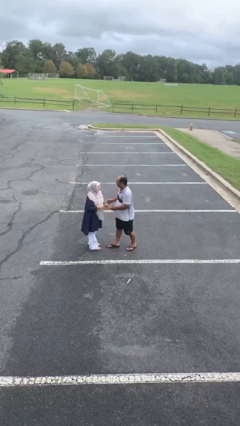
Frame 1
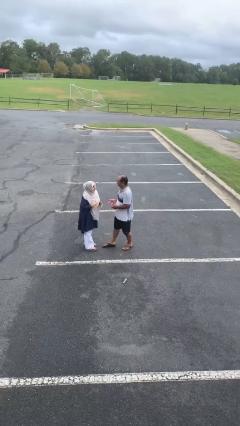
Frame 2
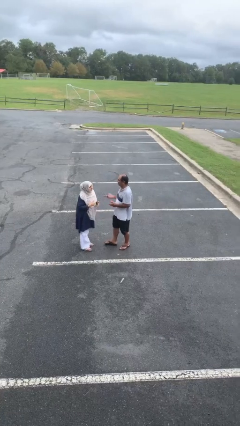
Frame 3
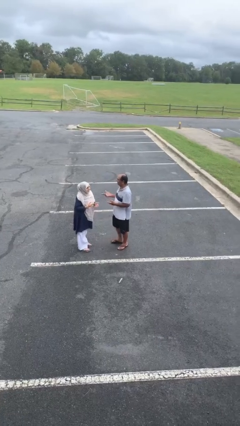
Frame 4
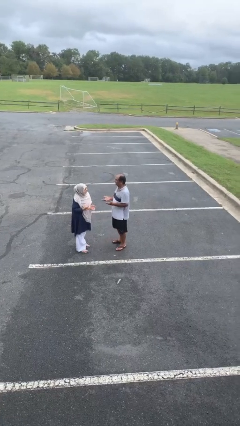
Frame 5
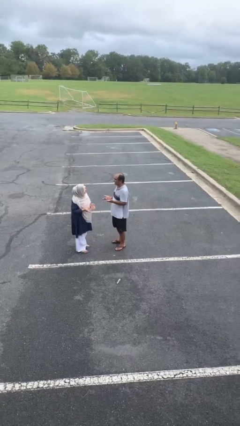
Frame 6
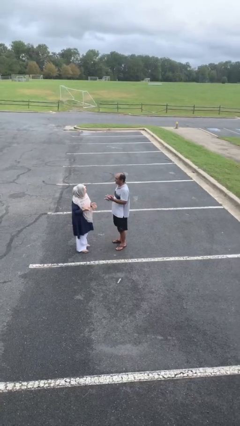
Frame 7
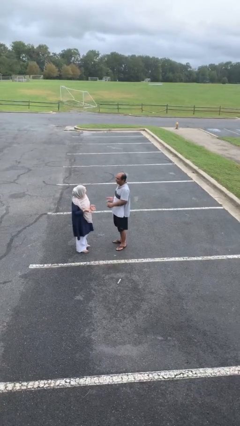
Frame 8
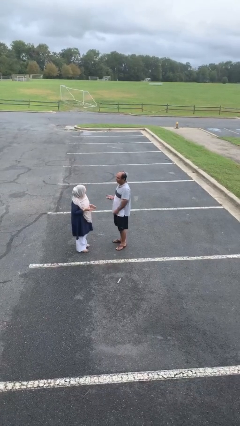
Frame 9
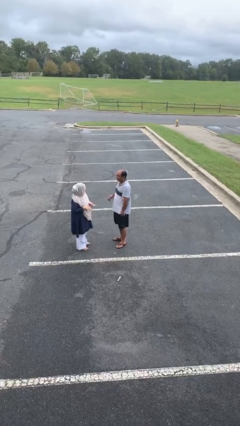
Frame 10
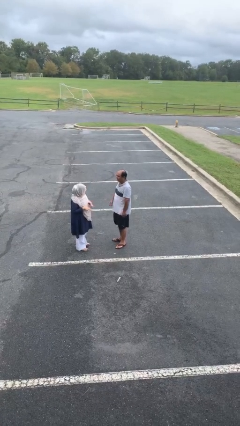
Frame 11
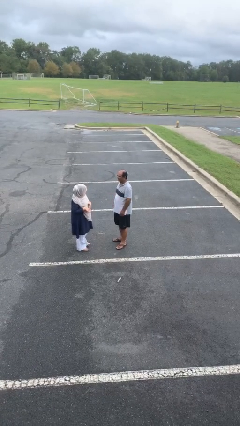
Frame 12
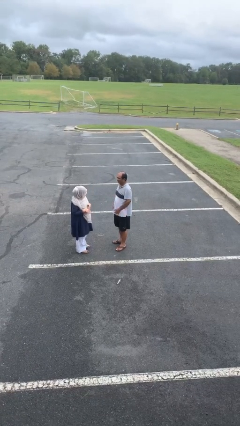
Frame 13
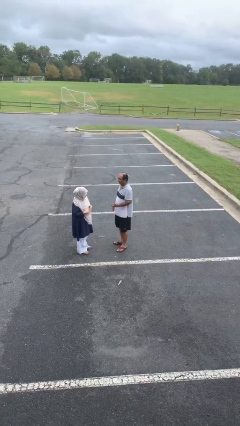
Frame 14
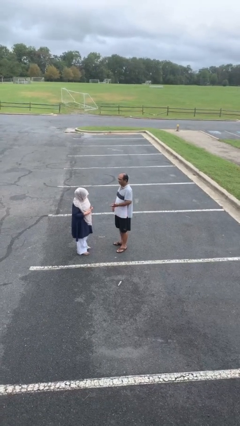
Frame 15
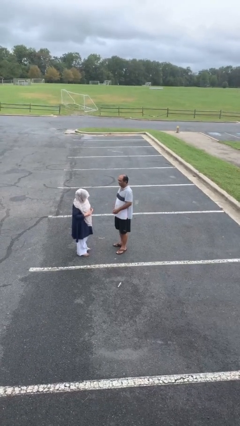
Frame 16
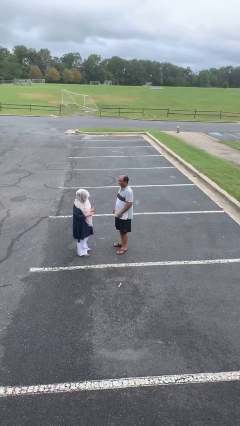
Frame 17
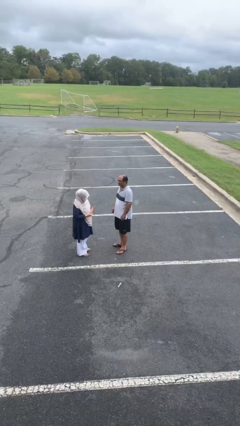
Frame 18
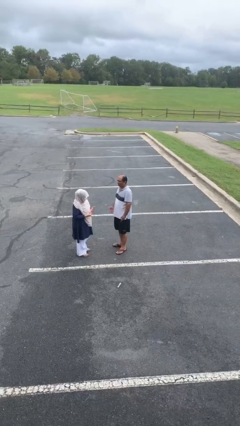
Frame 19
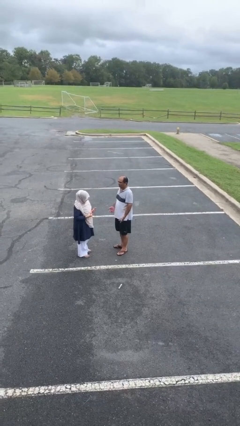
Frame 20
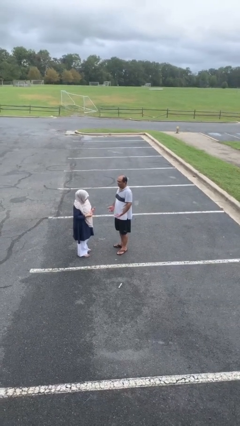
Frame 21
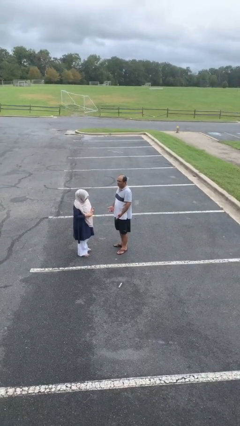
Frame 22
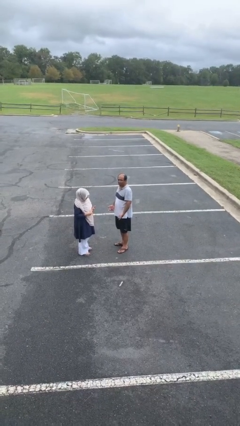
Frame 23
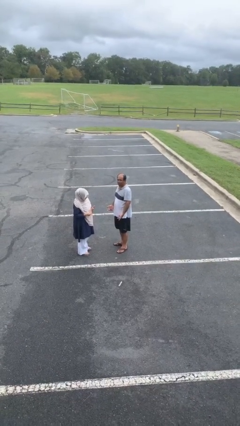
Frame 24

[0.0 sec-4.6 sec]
person talks to person

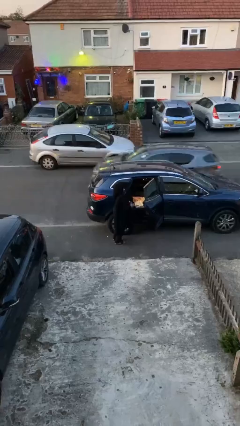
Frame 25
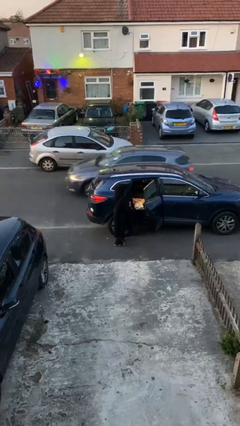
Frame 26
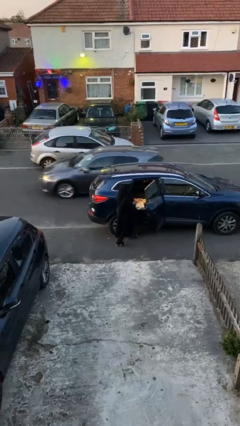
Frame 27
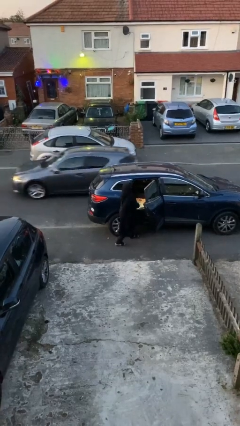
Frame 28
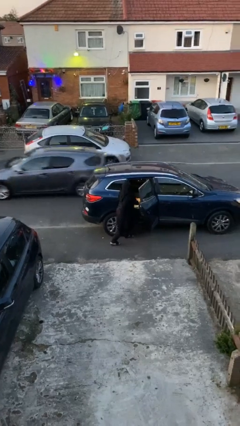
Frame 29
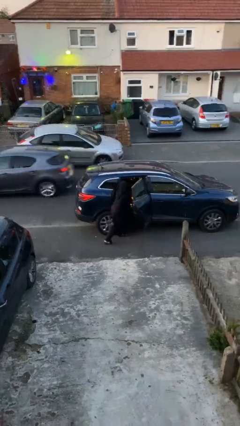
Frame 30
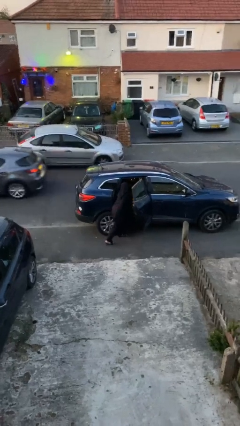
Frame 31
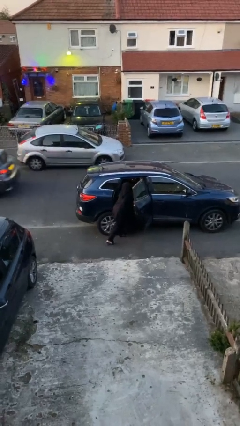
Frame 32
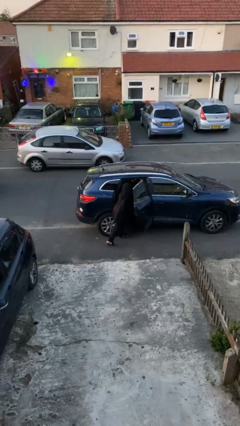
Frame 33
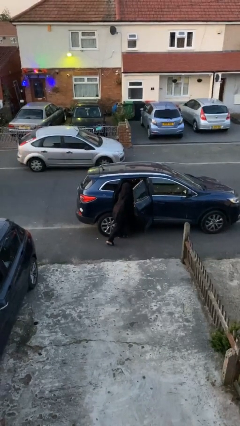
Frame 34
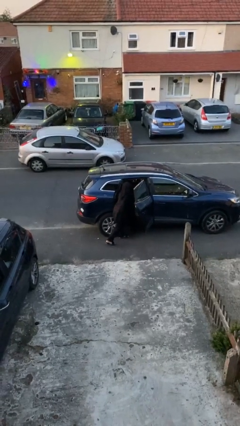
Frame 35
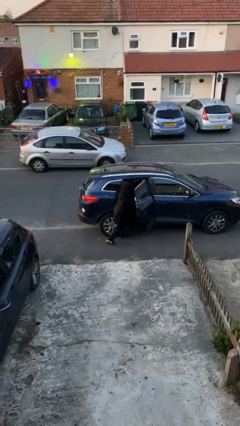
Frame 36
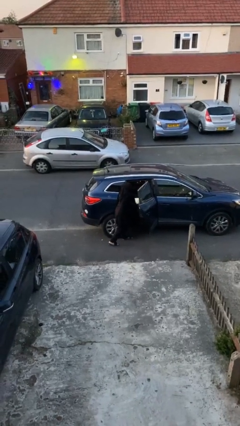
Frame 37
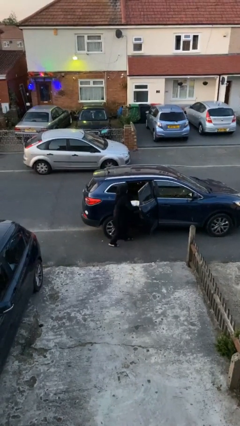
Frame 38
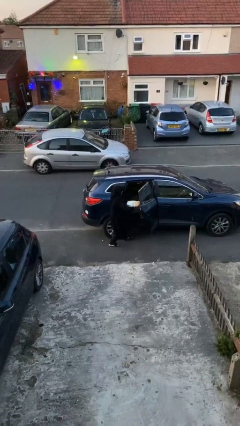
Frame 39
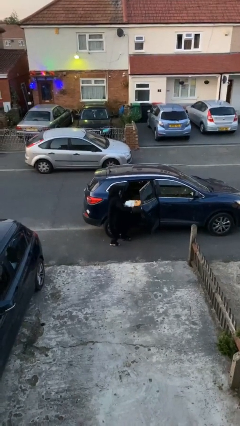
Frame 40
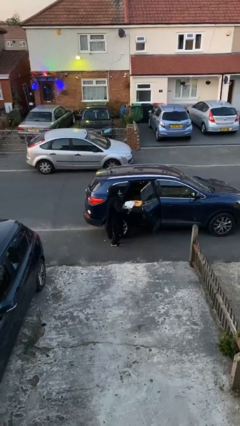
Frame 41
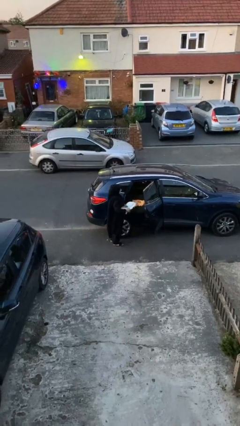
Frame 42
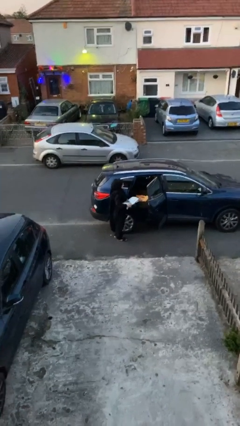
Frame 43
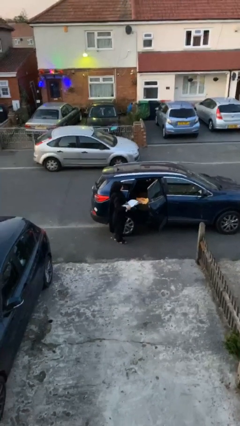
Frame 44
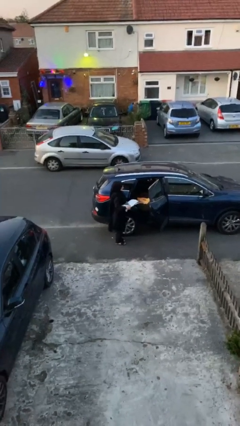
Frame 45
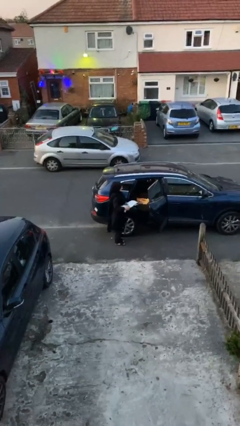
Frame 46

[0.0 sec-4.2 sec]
person unloads car

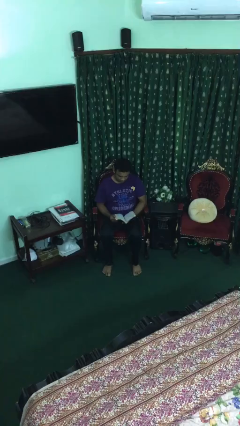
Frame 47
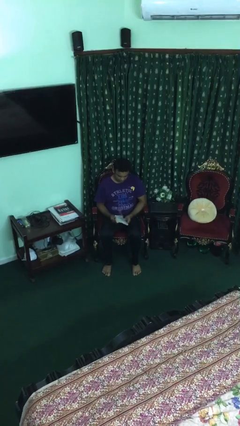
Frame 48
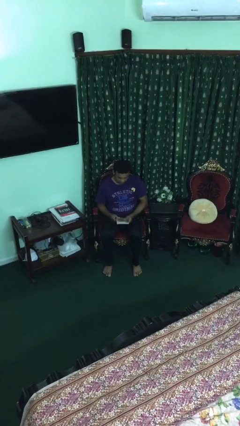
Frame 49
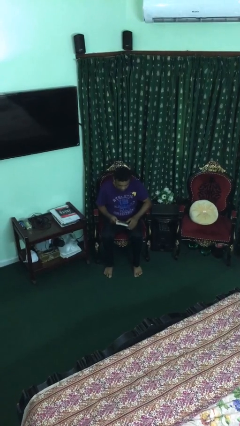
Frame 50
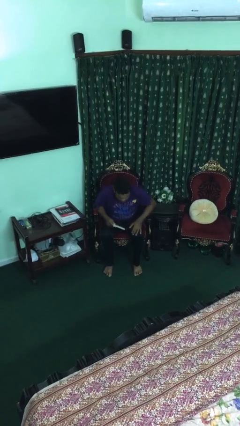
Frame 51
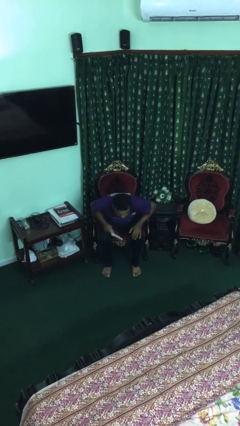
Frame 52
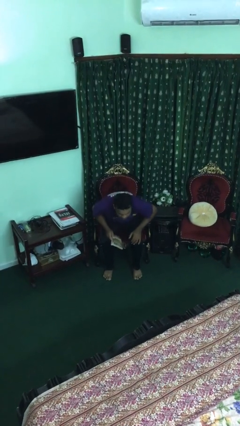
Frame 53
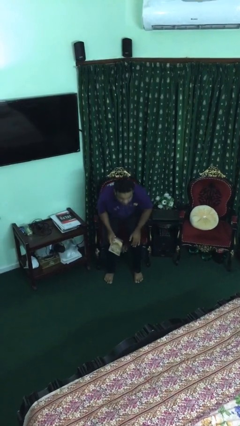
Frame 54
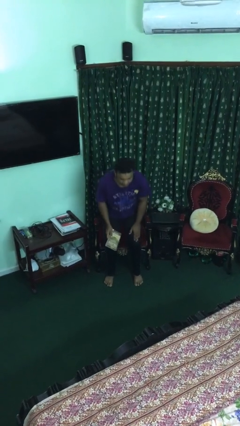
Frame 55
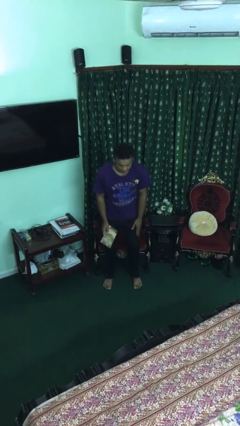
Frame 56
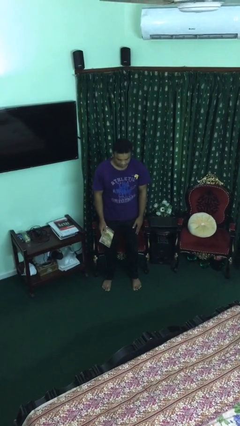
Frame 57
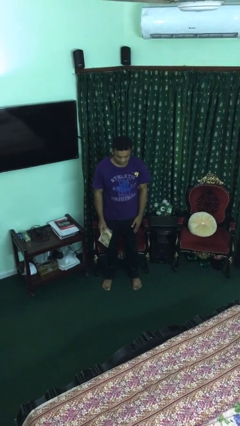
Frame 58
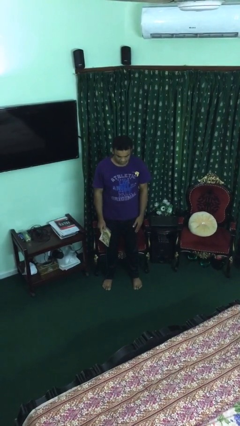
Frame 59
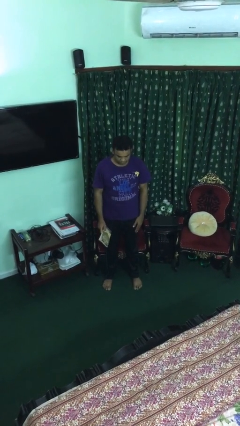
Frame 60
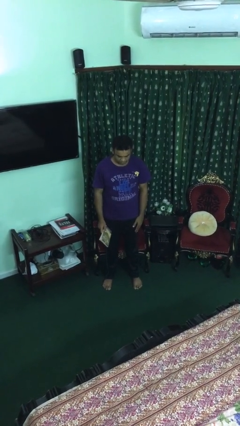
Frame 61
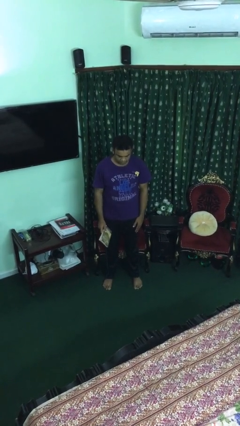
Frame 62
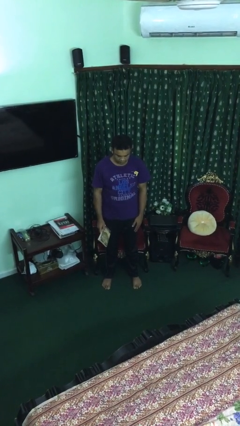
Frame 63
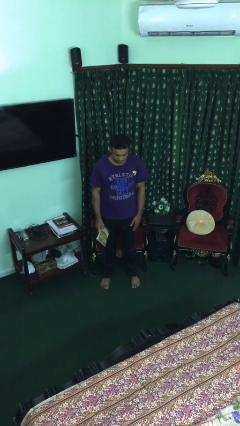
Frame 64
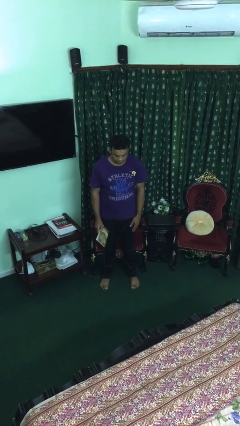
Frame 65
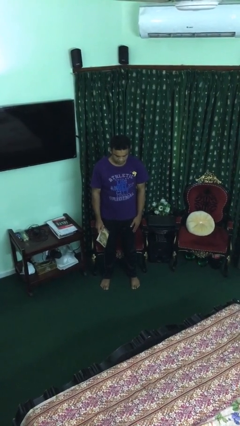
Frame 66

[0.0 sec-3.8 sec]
person stands up

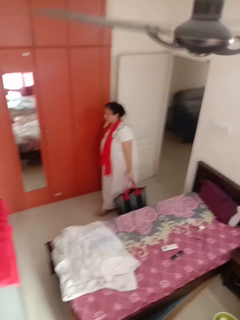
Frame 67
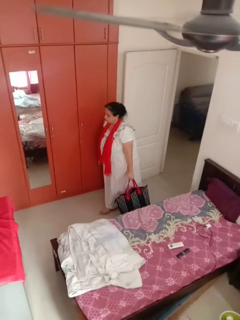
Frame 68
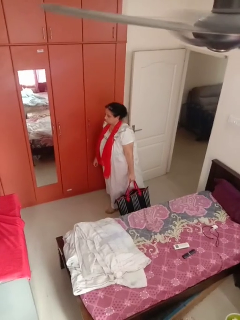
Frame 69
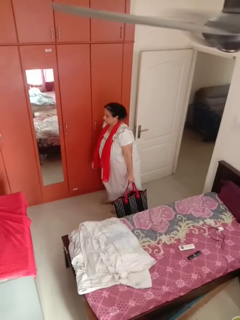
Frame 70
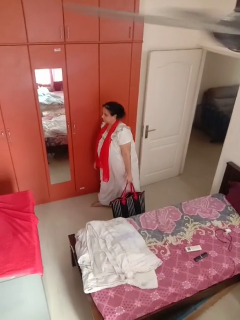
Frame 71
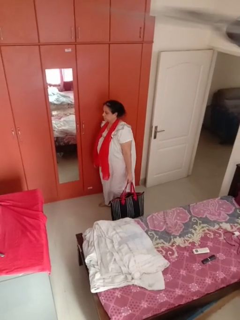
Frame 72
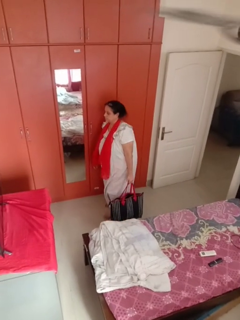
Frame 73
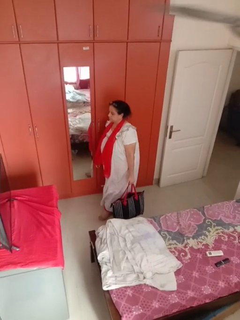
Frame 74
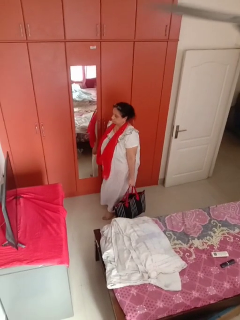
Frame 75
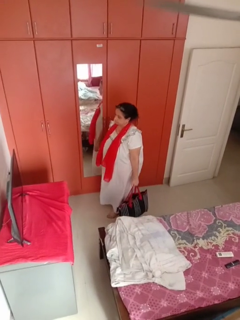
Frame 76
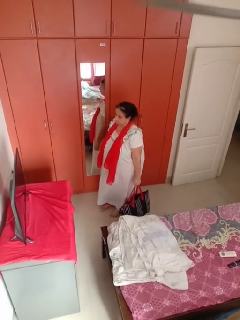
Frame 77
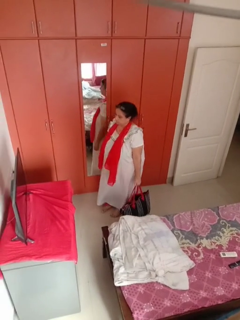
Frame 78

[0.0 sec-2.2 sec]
person carries groceries

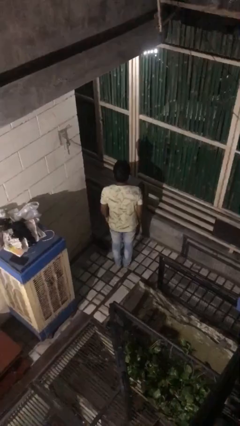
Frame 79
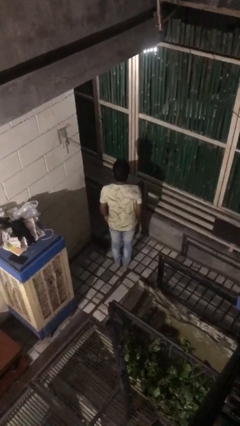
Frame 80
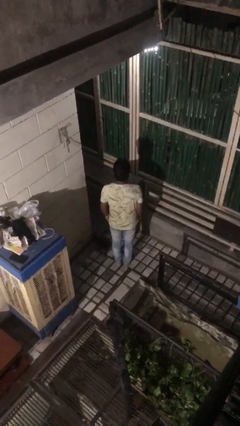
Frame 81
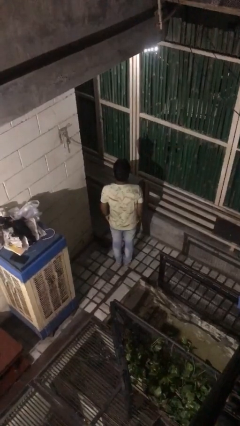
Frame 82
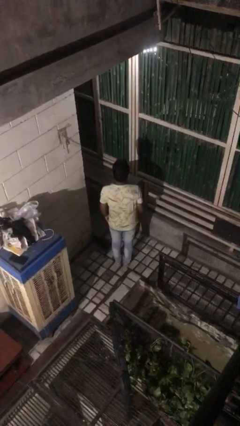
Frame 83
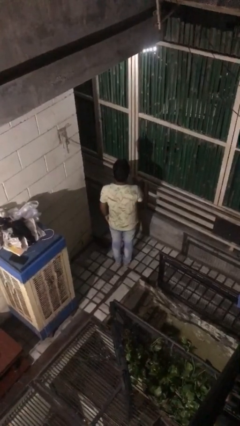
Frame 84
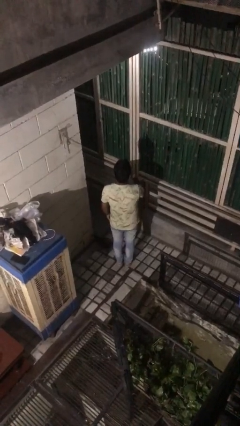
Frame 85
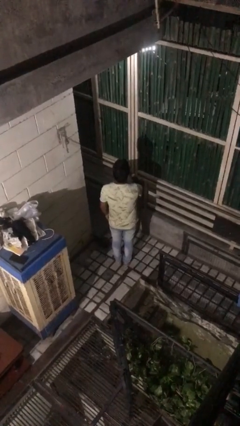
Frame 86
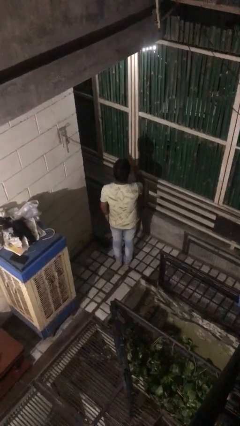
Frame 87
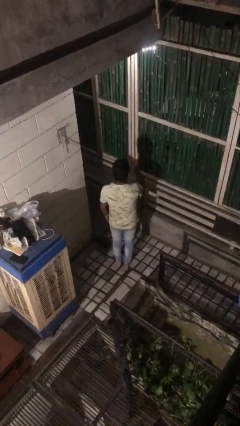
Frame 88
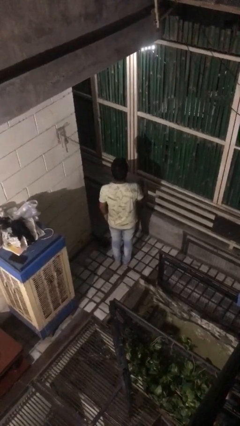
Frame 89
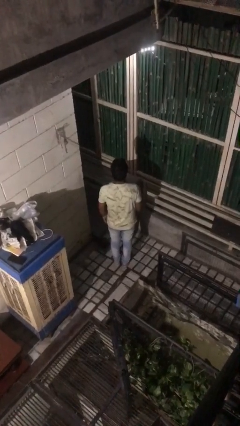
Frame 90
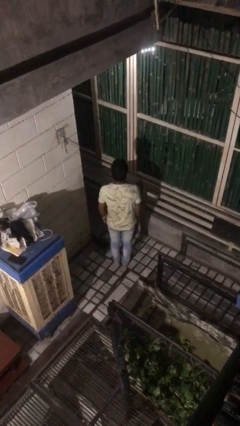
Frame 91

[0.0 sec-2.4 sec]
person gestures blow kiss

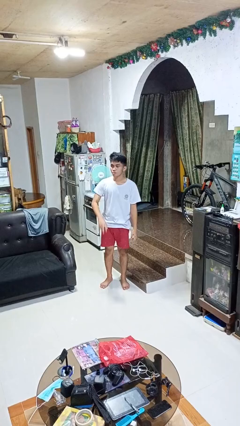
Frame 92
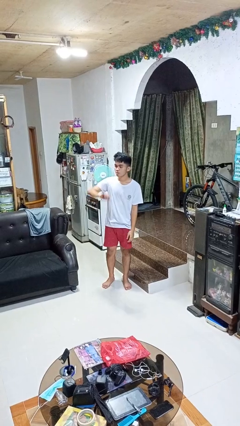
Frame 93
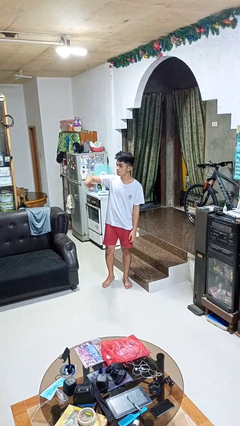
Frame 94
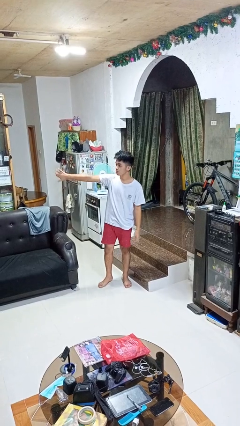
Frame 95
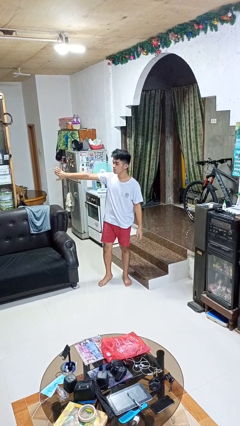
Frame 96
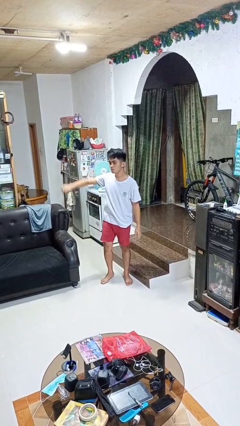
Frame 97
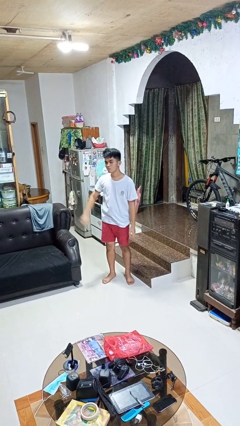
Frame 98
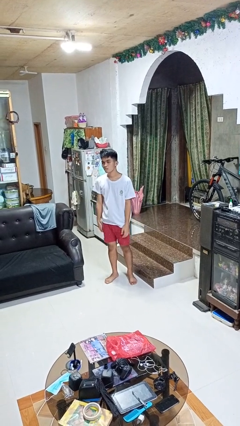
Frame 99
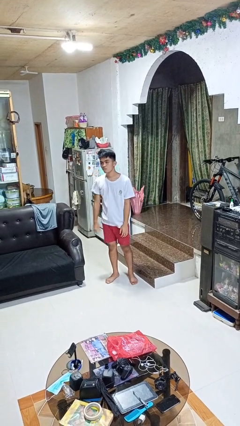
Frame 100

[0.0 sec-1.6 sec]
person gestures swipe right
